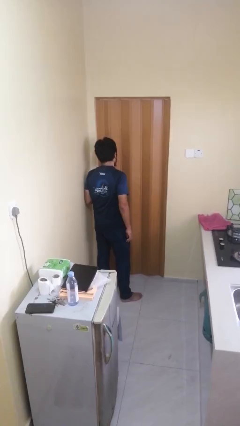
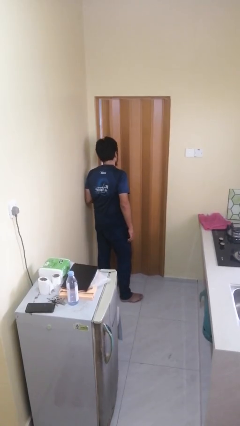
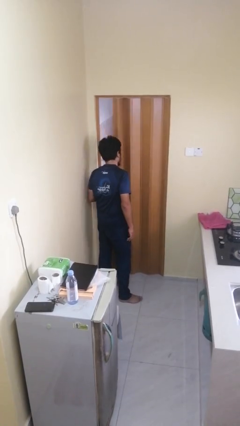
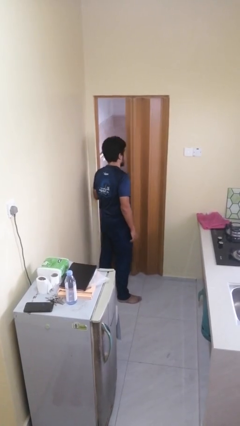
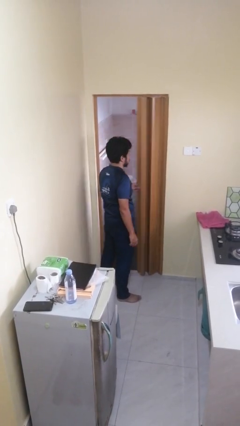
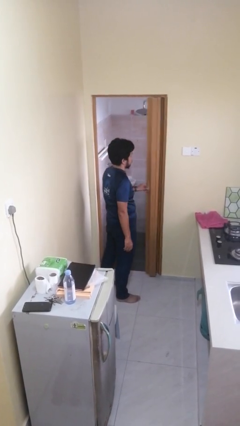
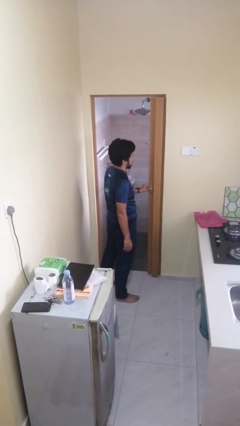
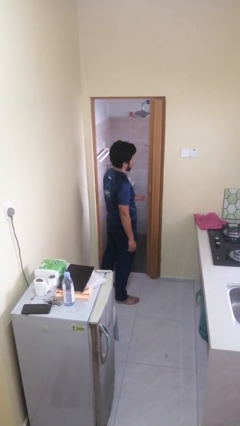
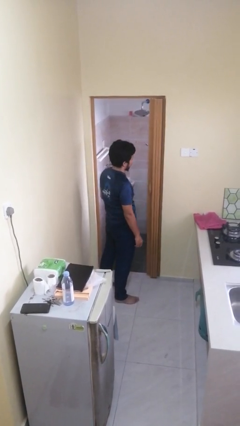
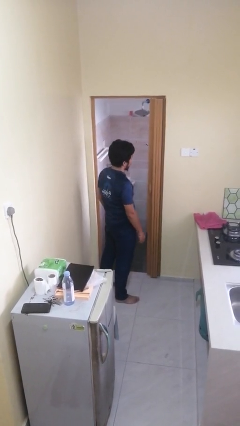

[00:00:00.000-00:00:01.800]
person opens sliding door

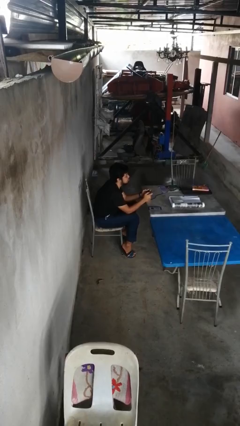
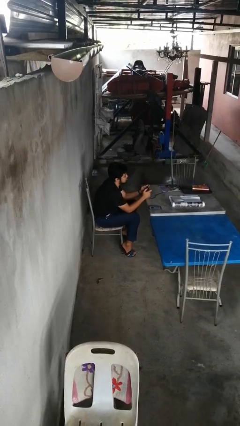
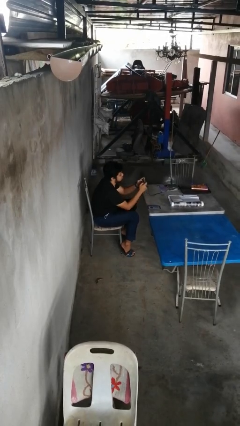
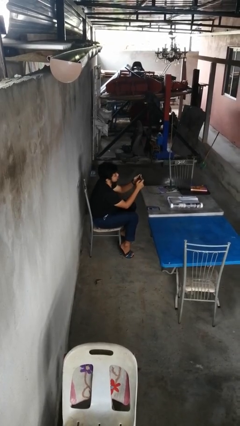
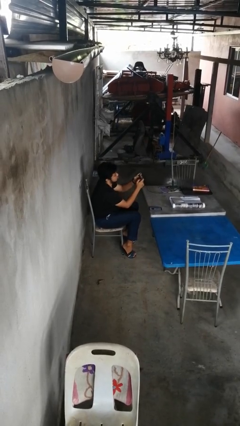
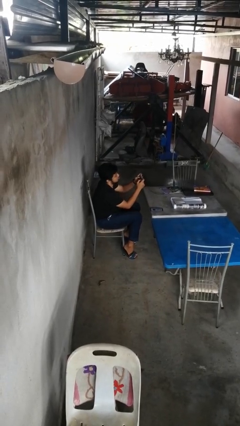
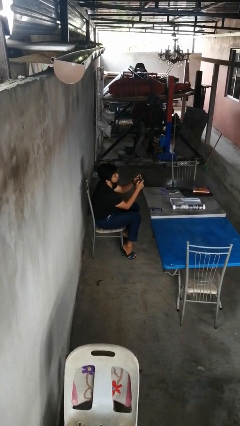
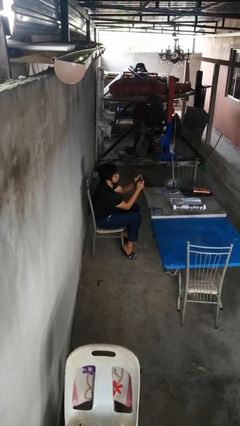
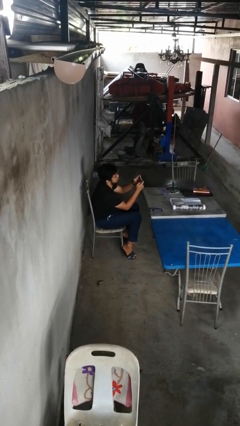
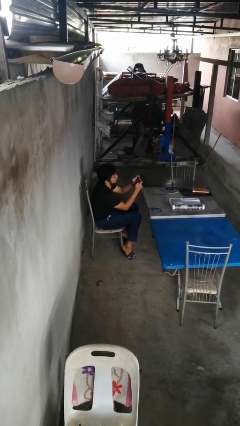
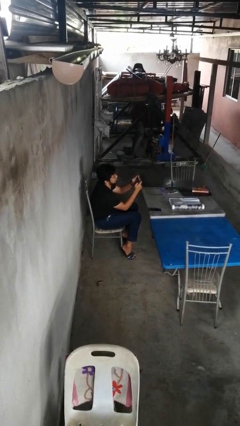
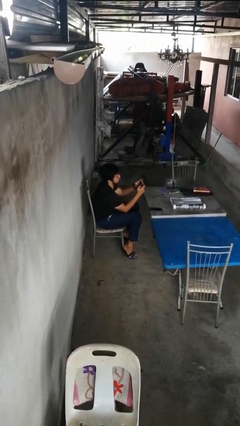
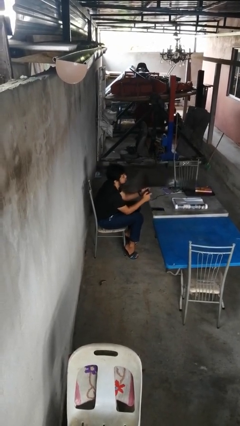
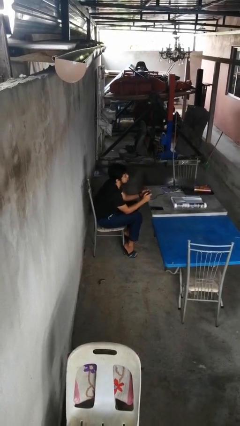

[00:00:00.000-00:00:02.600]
person interacts with handheld game

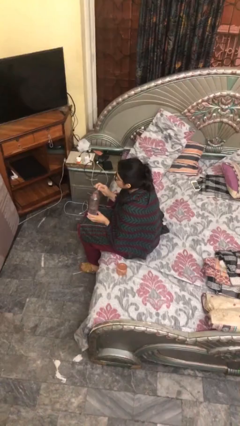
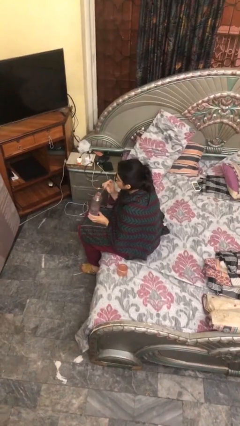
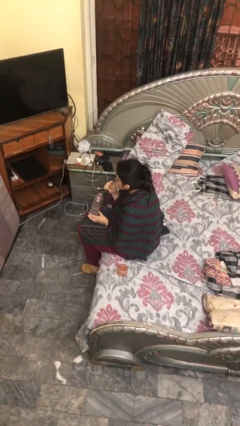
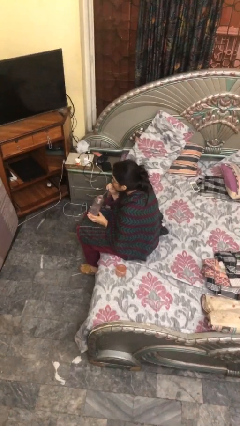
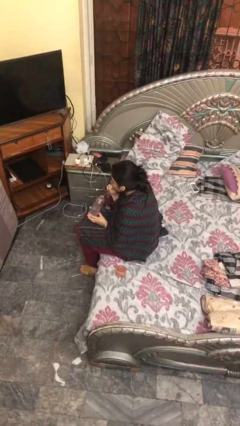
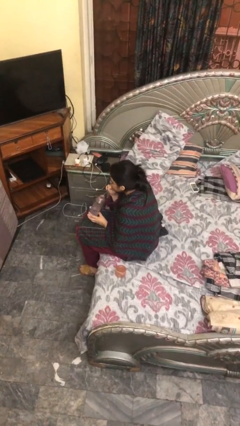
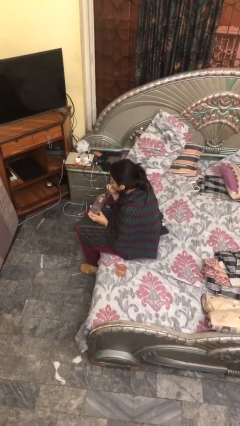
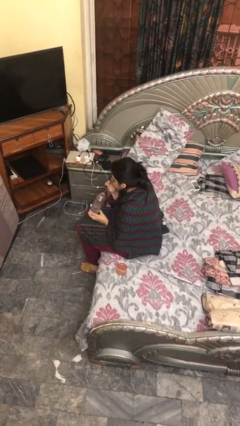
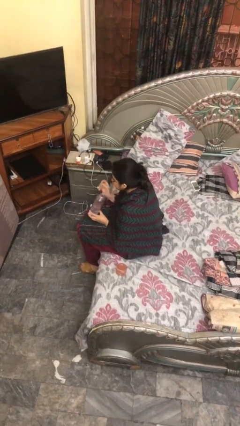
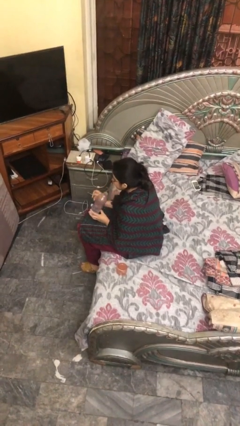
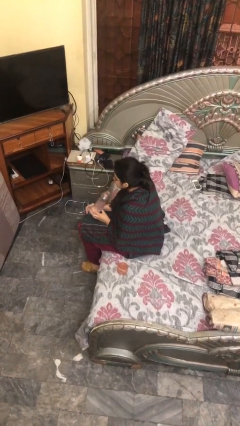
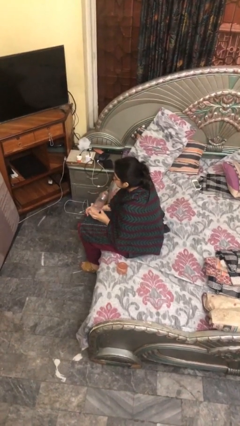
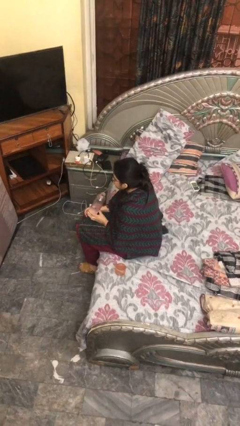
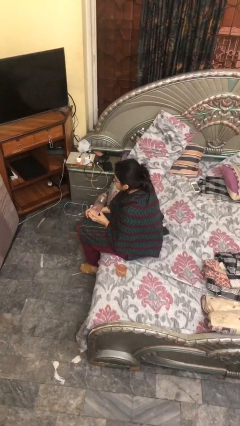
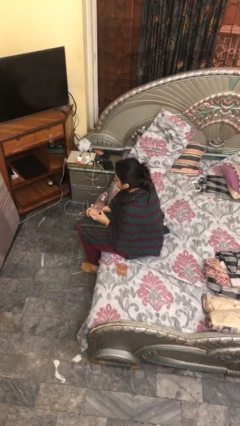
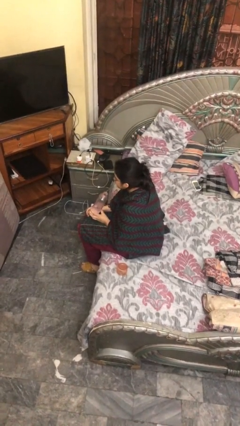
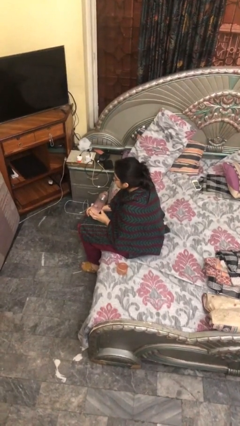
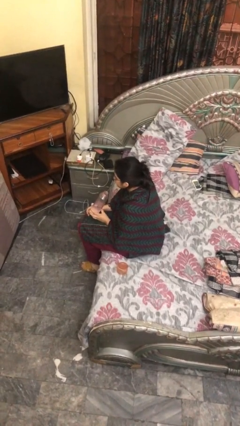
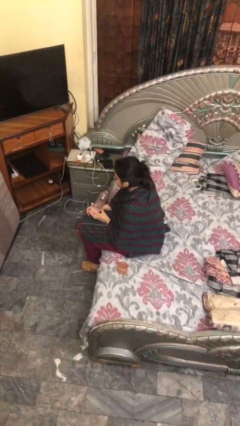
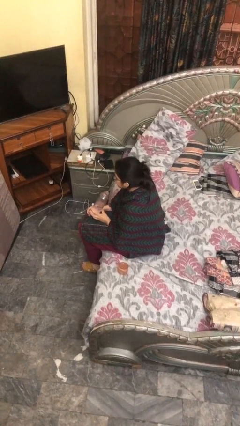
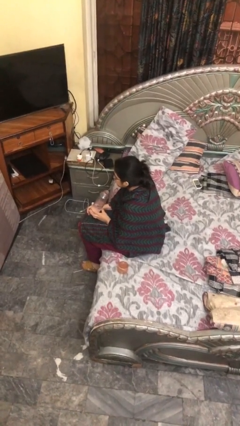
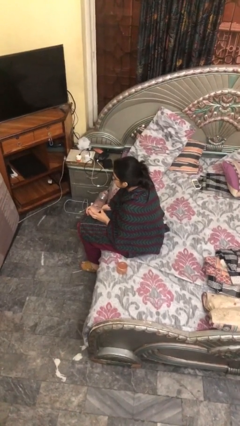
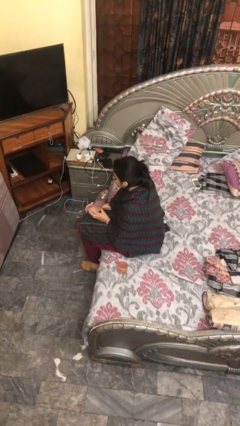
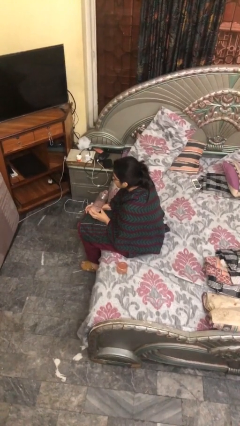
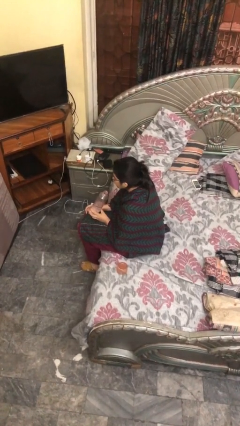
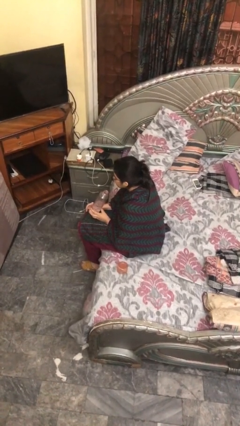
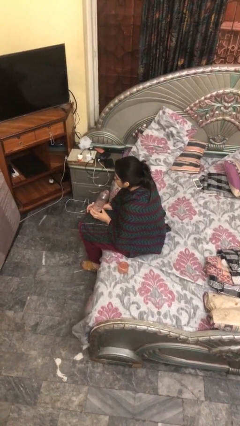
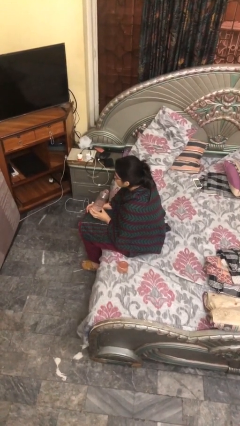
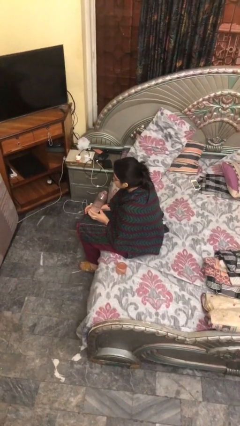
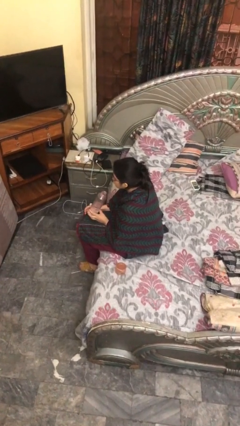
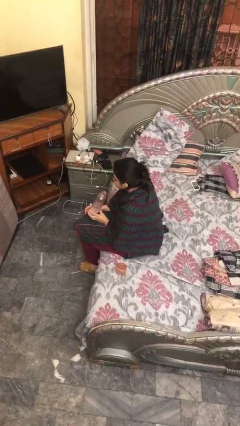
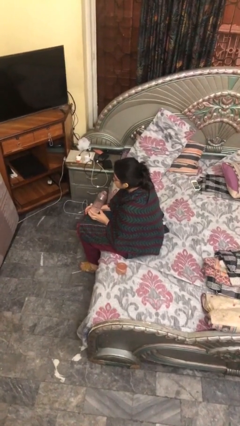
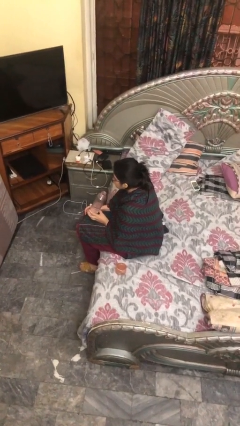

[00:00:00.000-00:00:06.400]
person drinks from straw

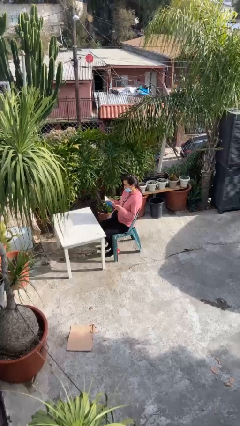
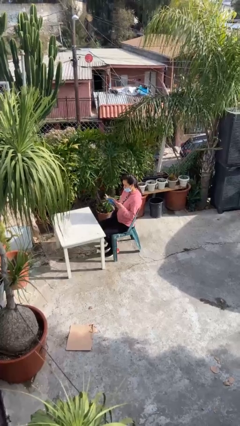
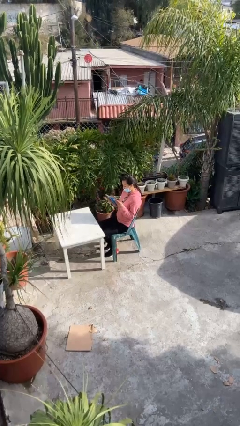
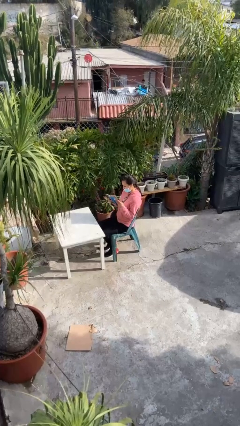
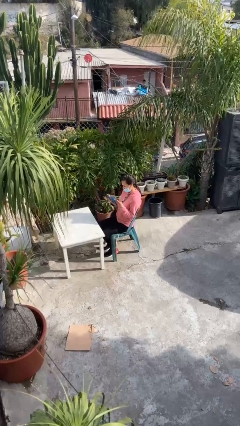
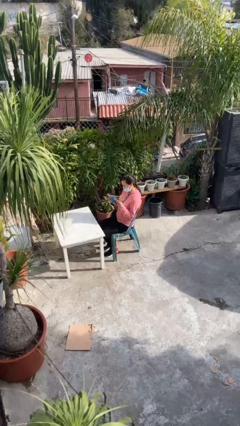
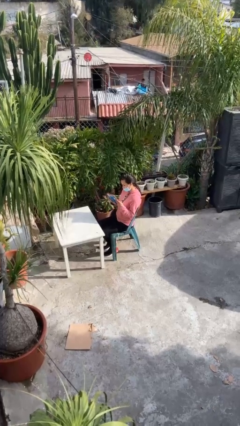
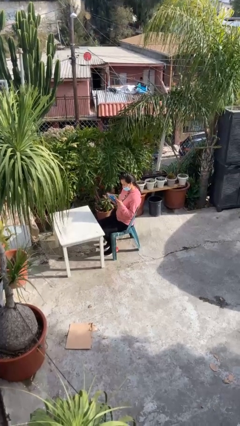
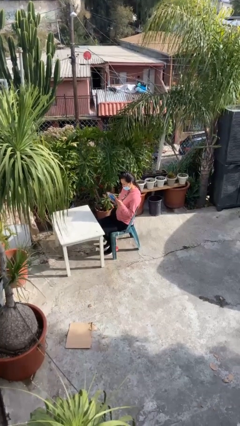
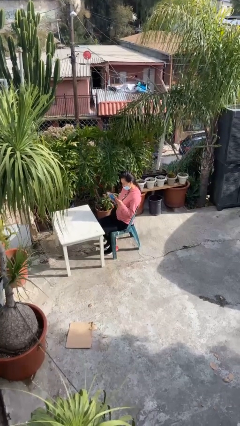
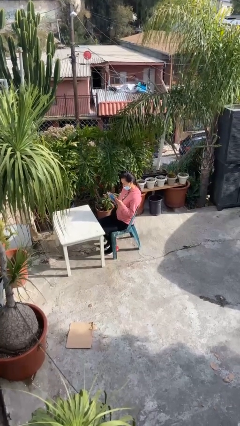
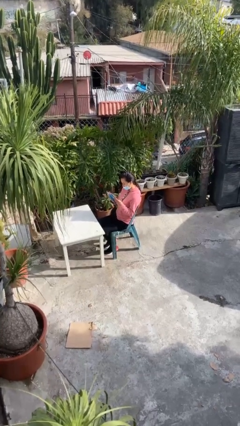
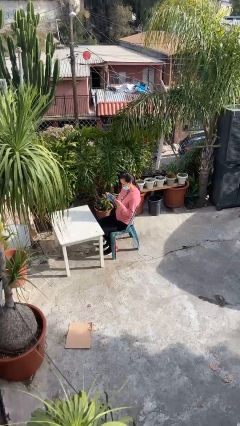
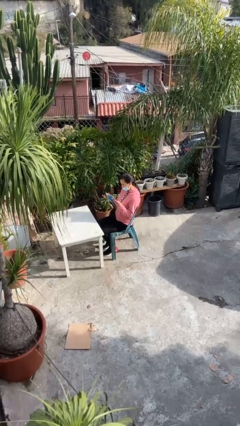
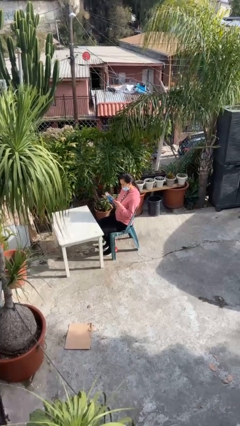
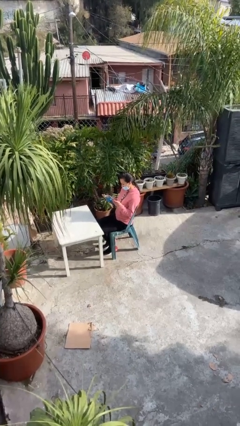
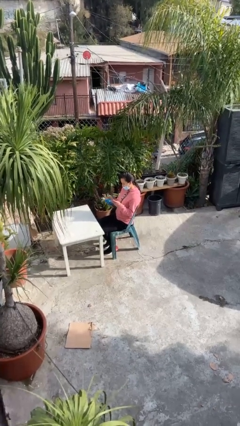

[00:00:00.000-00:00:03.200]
person reads document

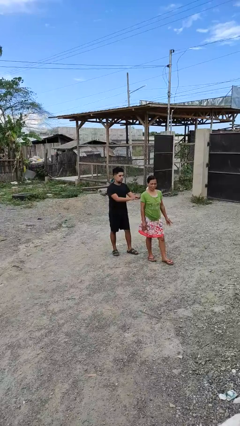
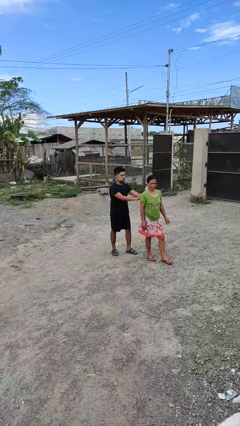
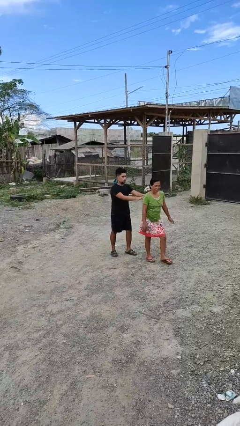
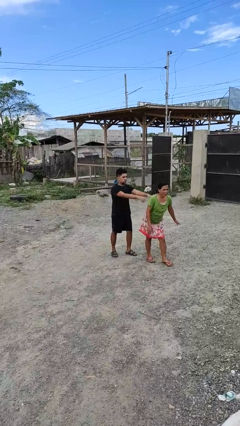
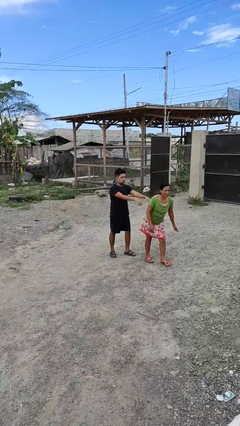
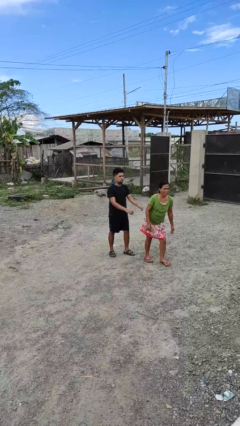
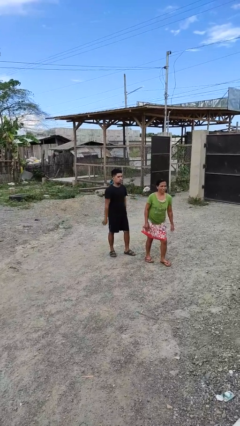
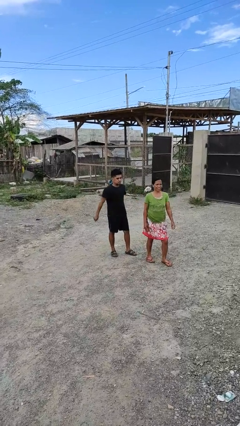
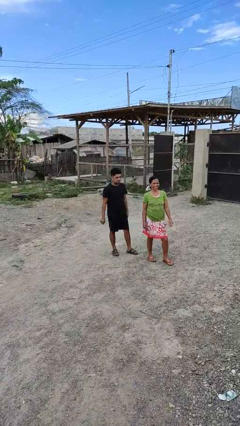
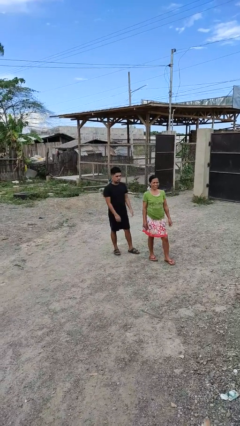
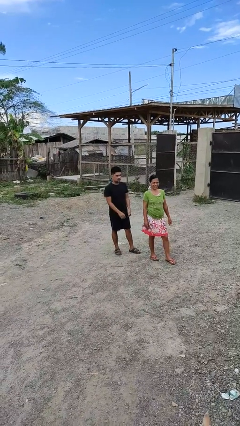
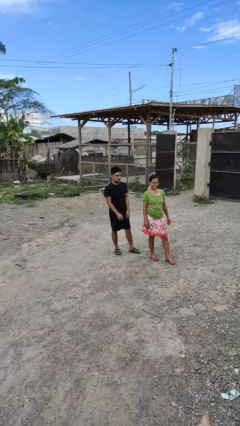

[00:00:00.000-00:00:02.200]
person shoves person

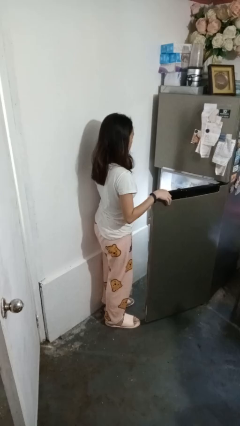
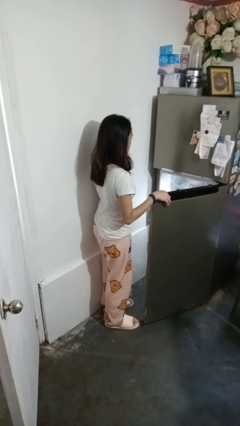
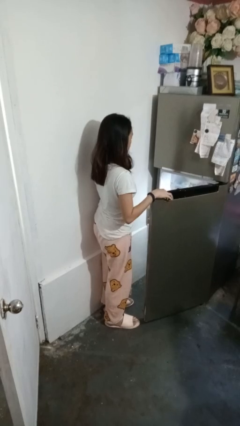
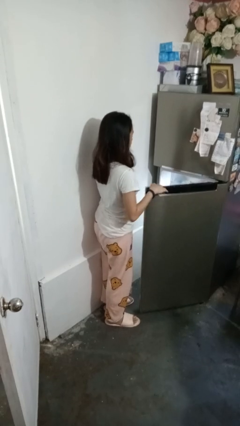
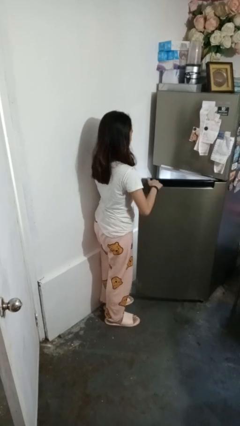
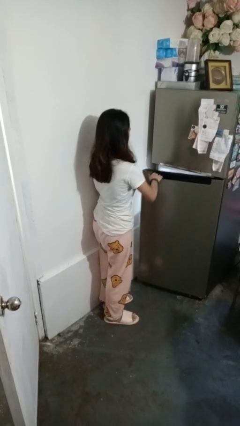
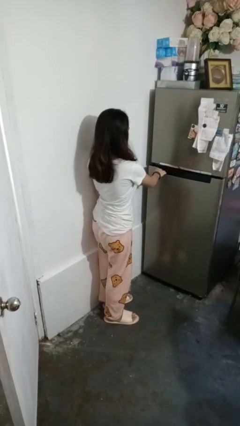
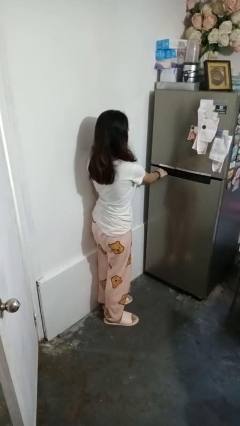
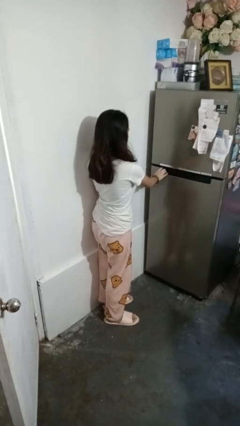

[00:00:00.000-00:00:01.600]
person closes refrigerator
